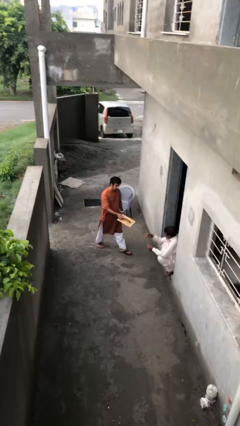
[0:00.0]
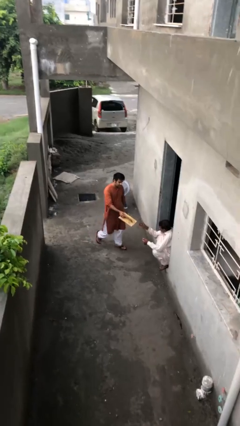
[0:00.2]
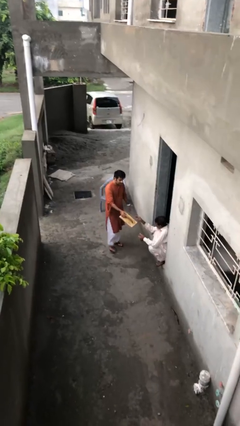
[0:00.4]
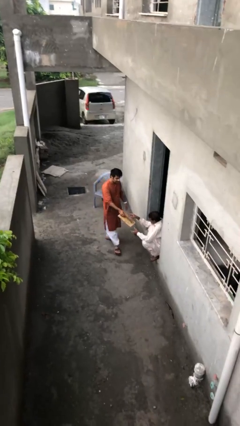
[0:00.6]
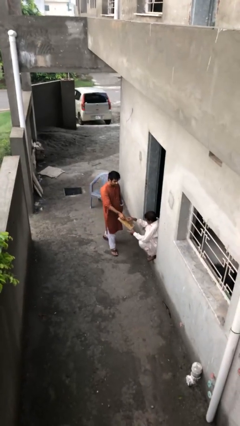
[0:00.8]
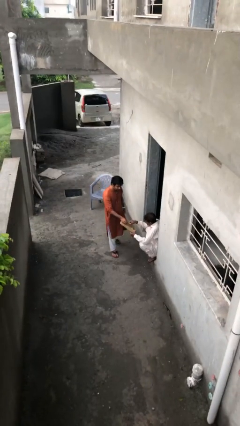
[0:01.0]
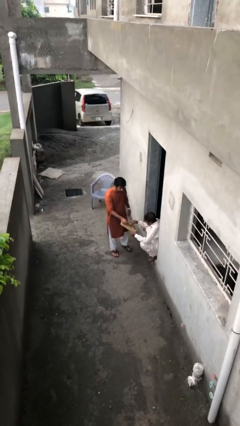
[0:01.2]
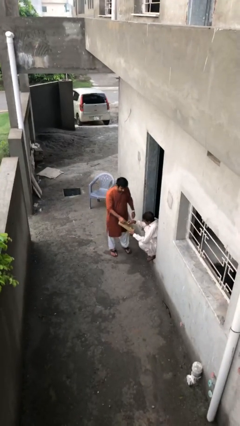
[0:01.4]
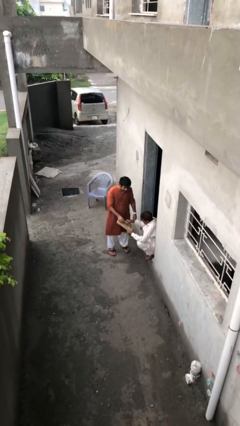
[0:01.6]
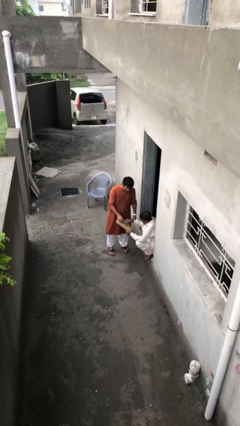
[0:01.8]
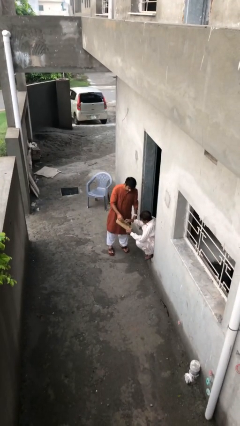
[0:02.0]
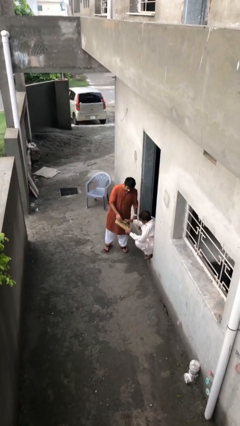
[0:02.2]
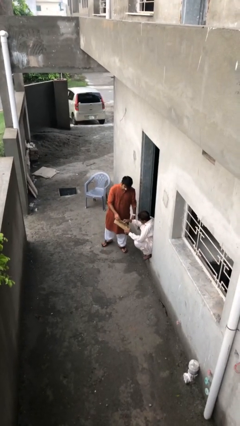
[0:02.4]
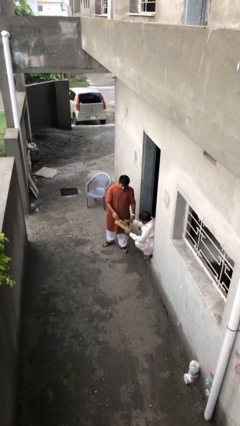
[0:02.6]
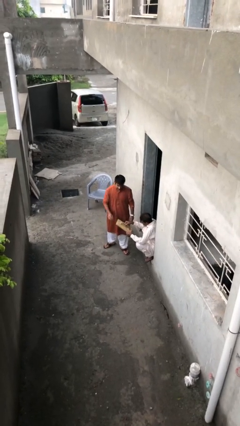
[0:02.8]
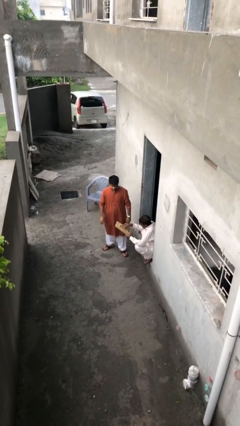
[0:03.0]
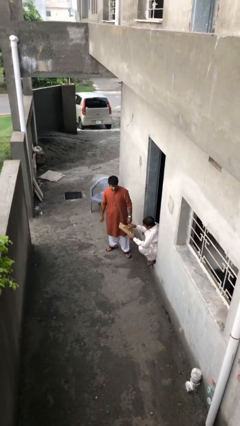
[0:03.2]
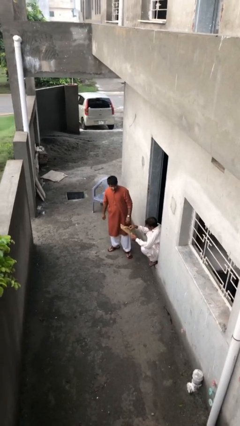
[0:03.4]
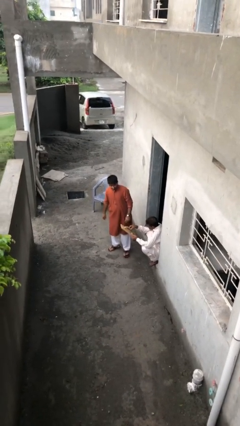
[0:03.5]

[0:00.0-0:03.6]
person transfers object to person

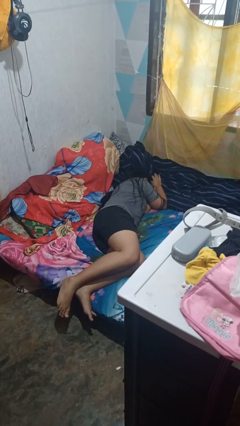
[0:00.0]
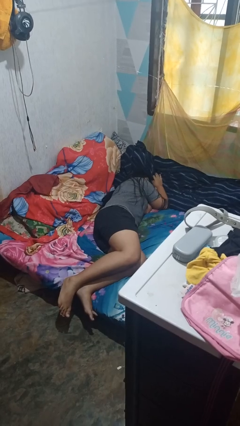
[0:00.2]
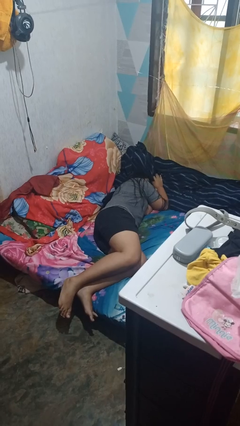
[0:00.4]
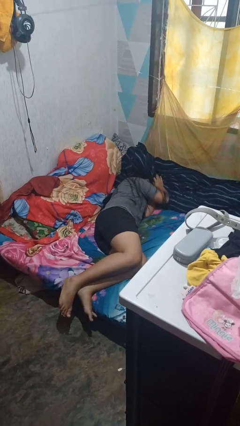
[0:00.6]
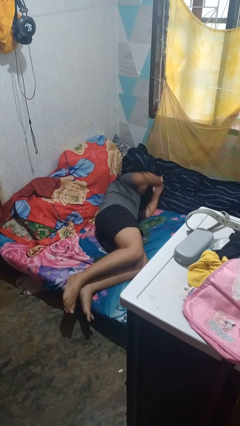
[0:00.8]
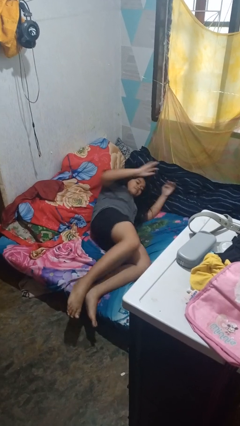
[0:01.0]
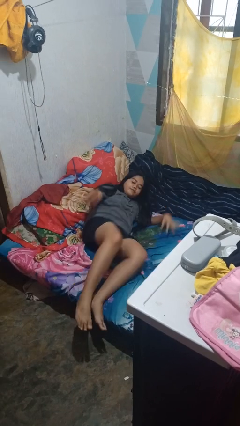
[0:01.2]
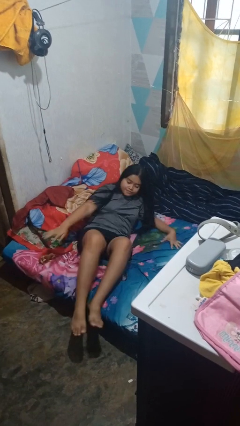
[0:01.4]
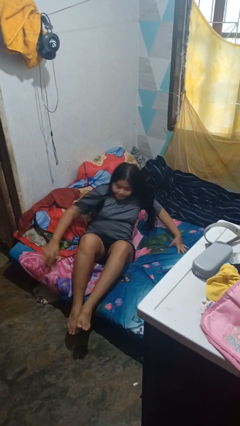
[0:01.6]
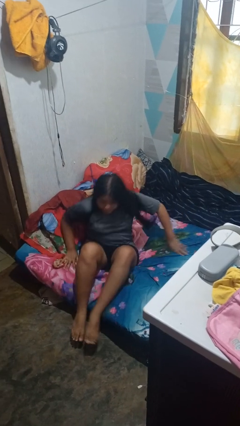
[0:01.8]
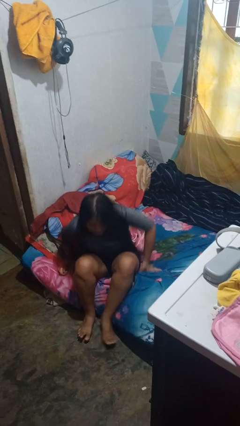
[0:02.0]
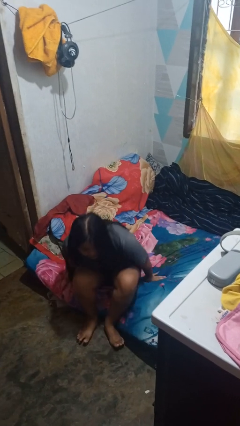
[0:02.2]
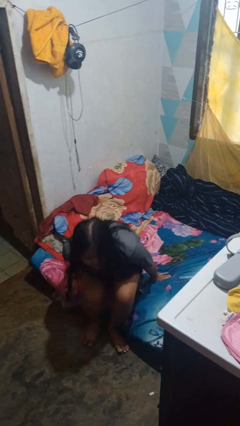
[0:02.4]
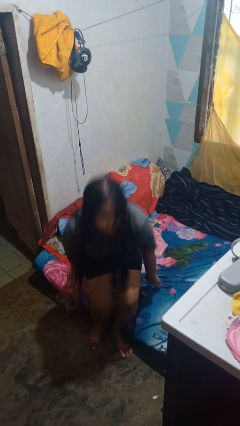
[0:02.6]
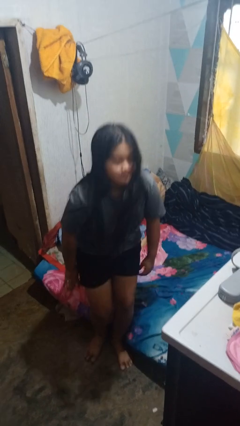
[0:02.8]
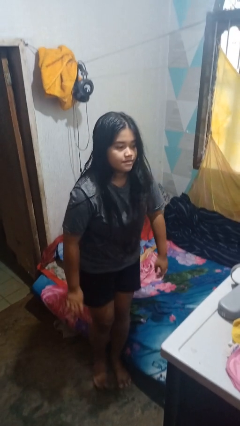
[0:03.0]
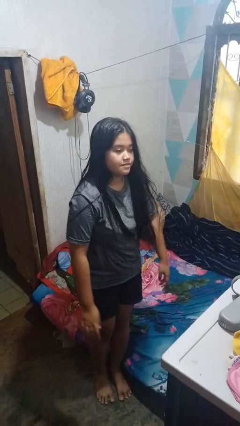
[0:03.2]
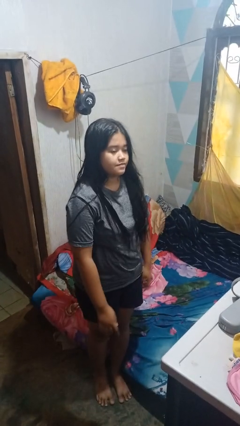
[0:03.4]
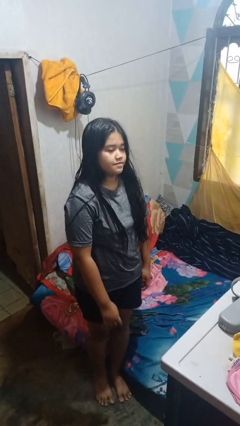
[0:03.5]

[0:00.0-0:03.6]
person stands up

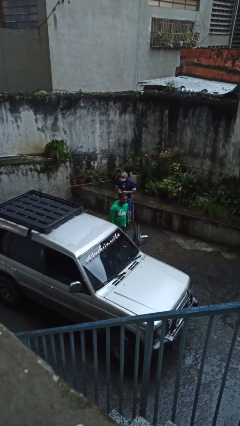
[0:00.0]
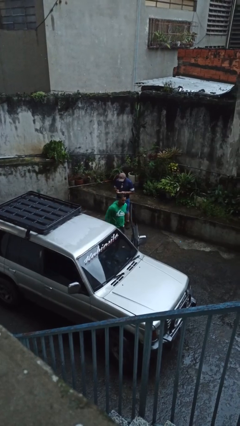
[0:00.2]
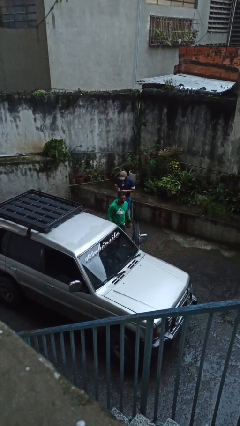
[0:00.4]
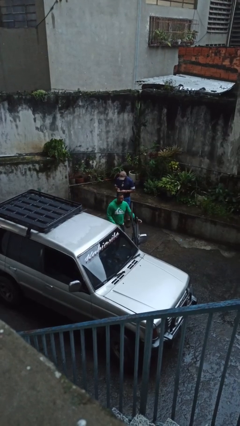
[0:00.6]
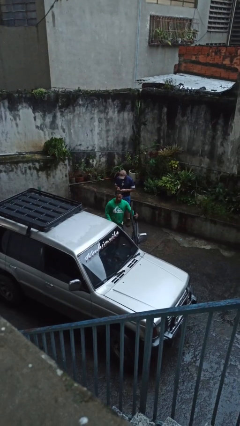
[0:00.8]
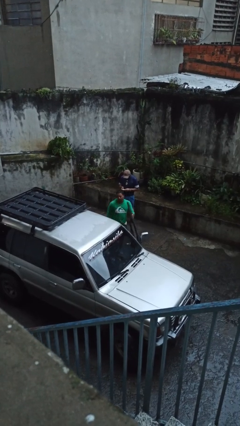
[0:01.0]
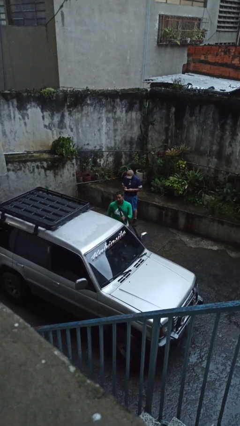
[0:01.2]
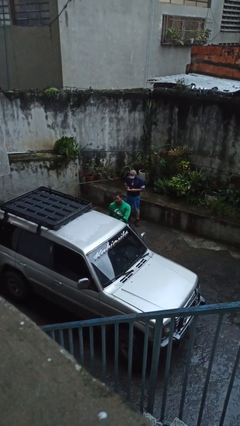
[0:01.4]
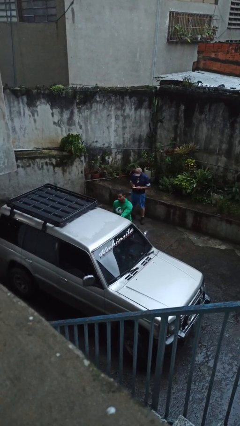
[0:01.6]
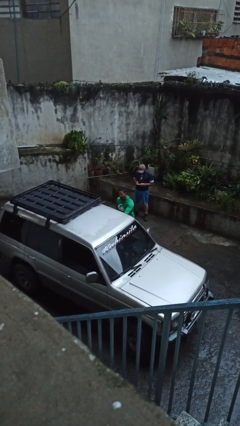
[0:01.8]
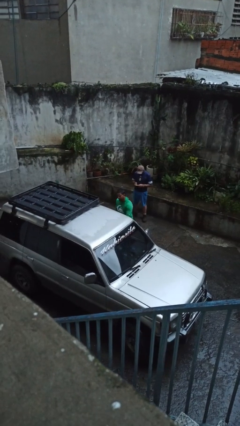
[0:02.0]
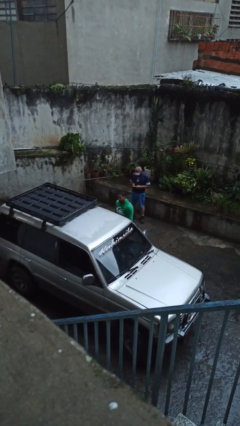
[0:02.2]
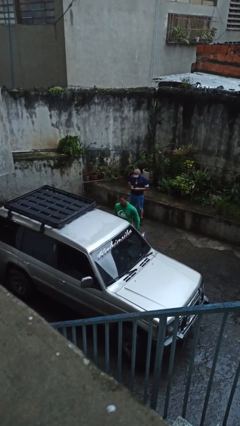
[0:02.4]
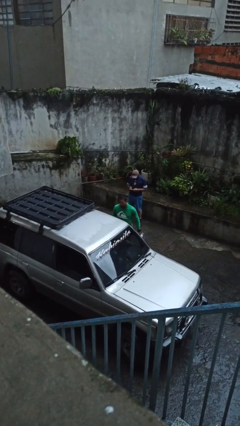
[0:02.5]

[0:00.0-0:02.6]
person closes car door

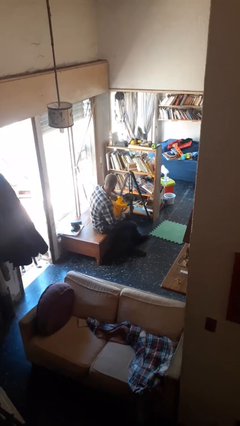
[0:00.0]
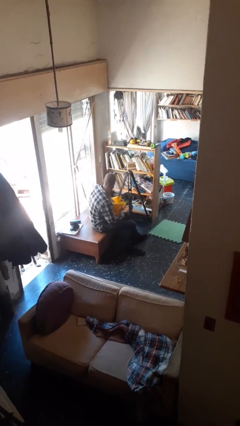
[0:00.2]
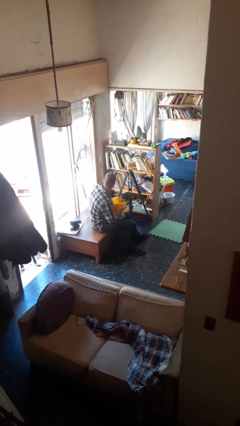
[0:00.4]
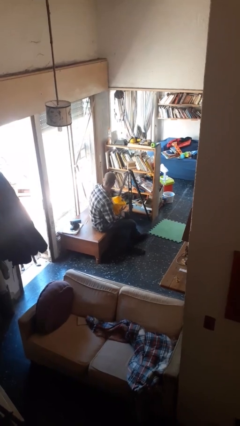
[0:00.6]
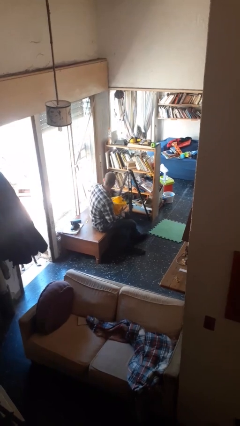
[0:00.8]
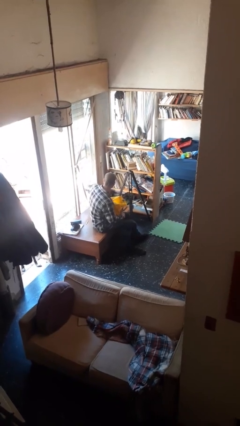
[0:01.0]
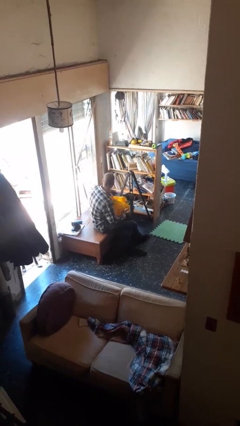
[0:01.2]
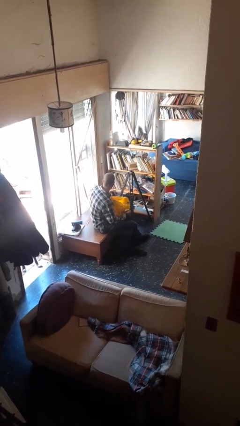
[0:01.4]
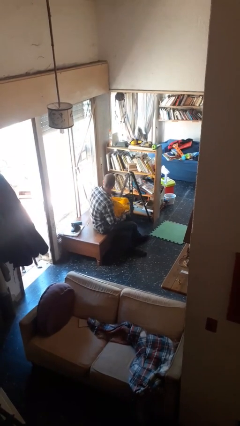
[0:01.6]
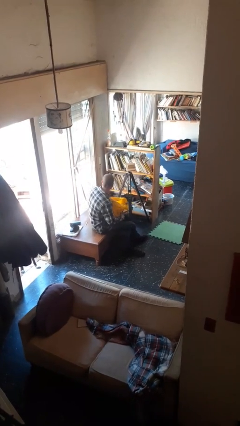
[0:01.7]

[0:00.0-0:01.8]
person puts object into bag

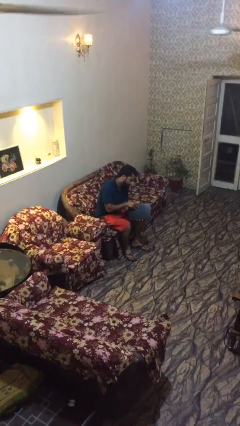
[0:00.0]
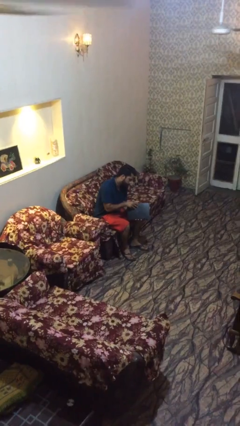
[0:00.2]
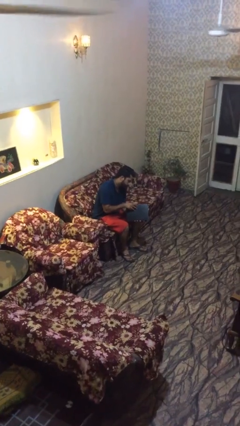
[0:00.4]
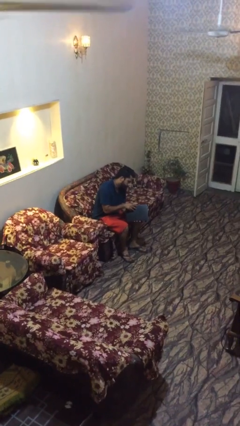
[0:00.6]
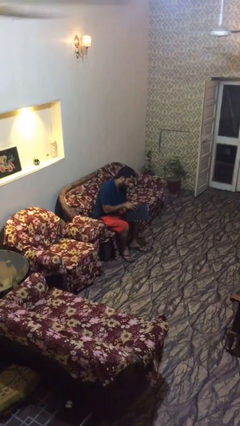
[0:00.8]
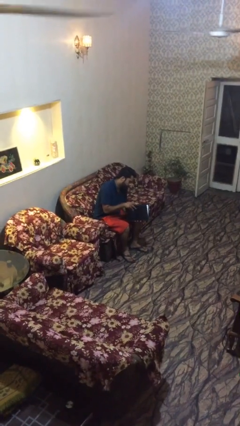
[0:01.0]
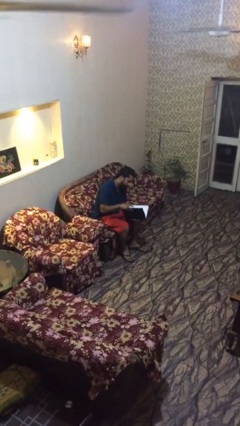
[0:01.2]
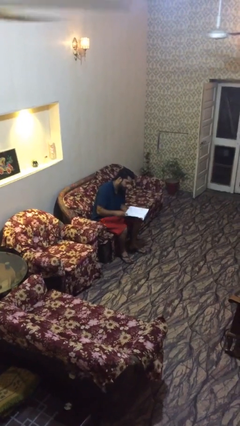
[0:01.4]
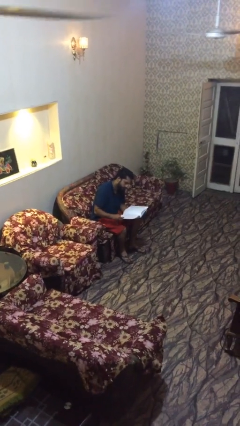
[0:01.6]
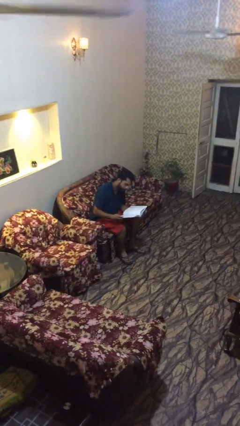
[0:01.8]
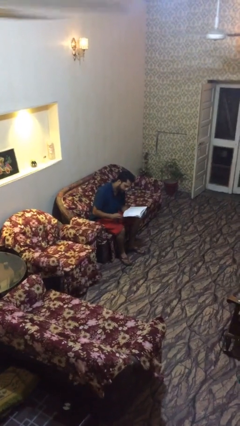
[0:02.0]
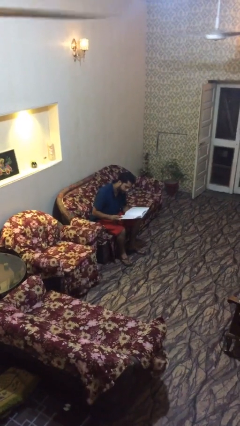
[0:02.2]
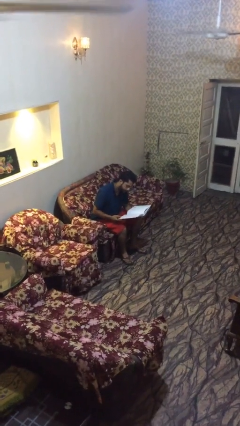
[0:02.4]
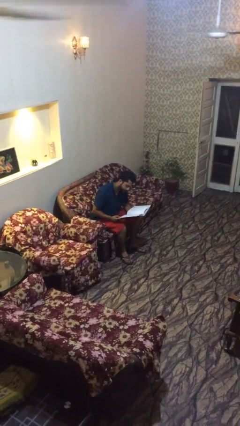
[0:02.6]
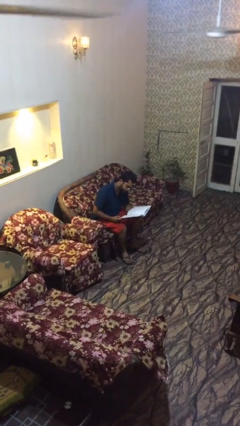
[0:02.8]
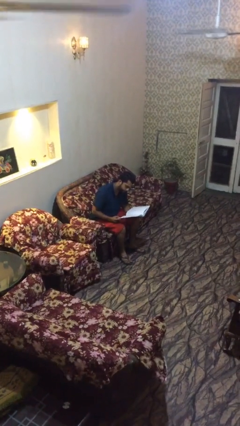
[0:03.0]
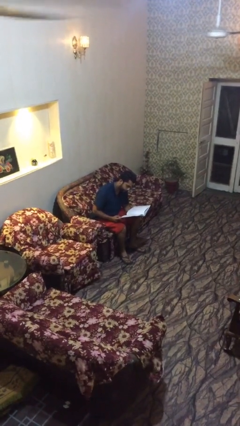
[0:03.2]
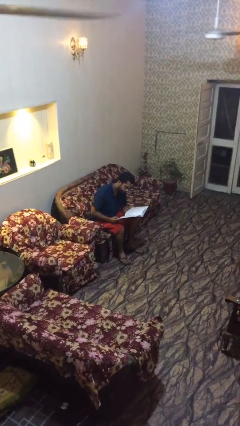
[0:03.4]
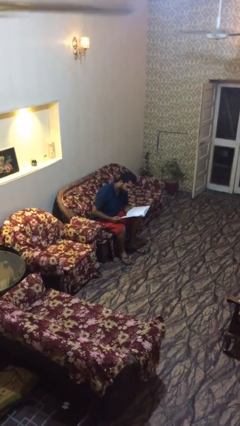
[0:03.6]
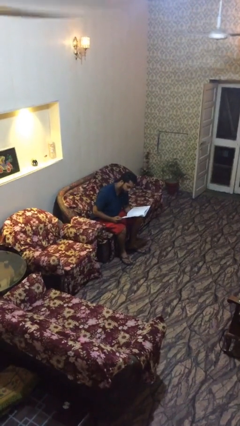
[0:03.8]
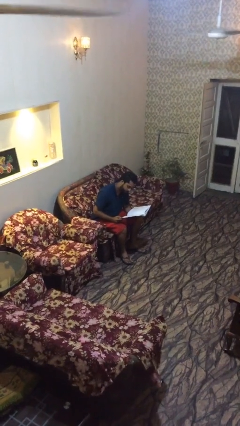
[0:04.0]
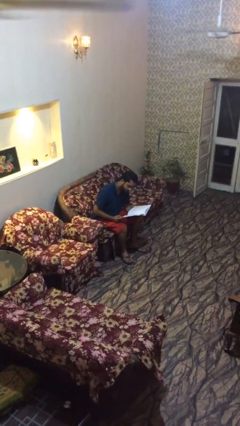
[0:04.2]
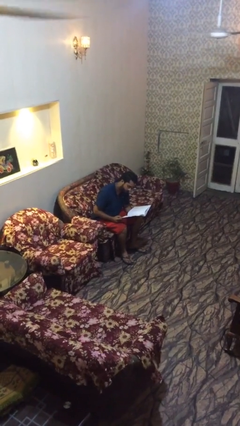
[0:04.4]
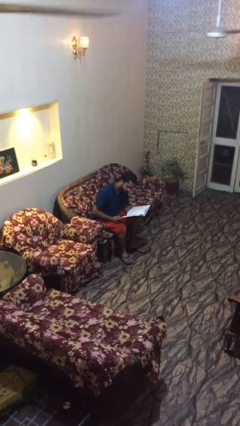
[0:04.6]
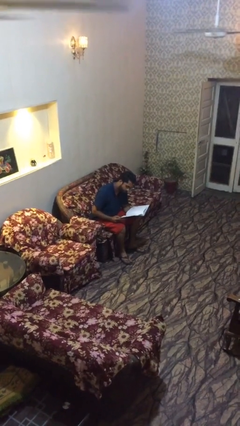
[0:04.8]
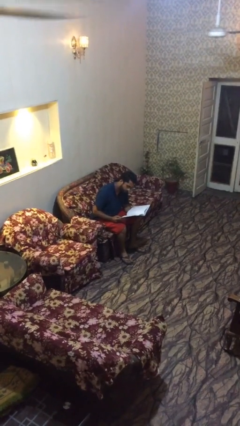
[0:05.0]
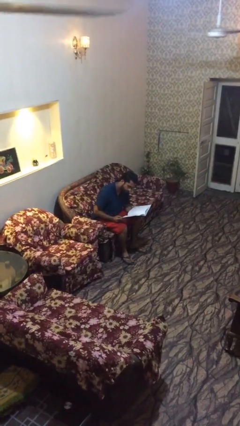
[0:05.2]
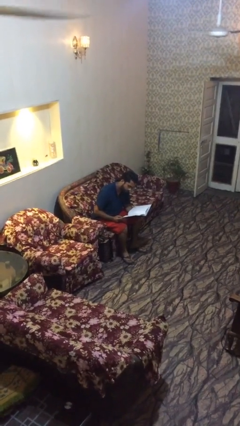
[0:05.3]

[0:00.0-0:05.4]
person reads document

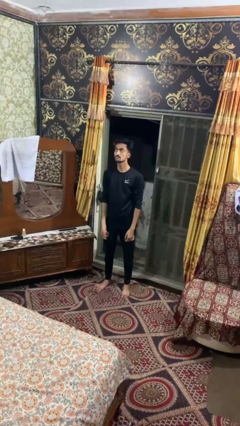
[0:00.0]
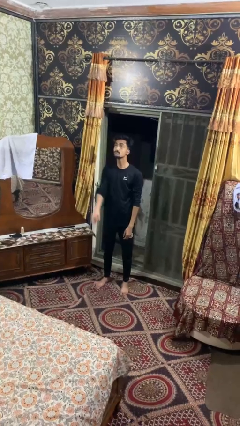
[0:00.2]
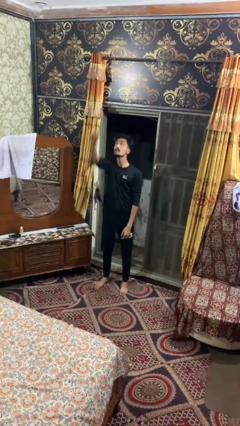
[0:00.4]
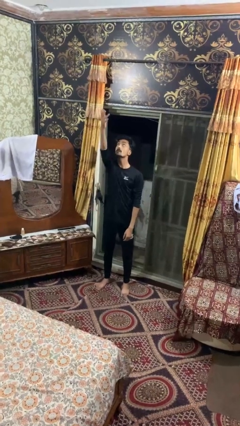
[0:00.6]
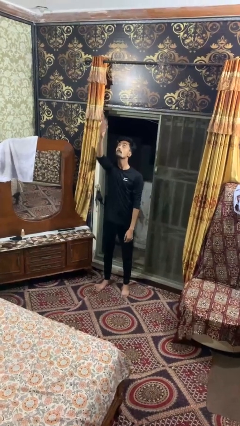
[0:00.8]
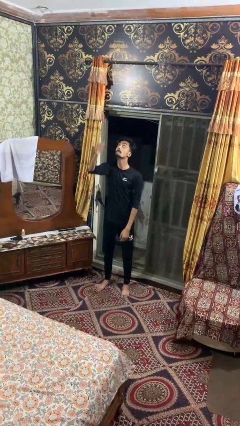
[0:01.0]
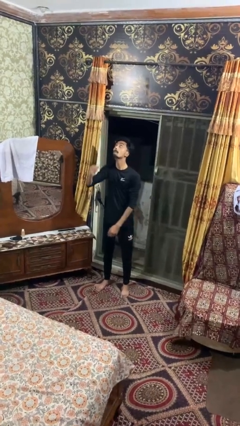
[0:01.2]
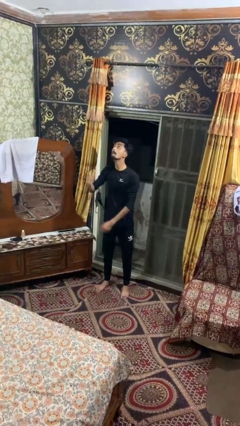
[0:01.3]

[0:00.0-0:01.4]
person drops object
